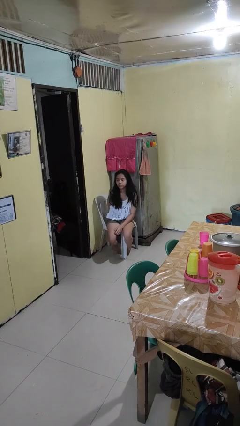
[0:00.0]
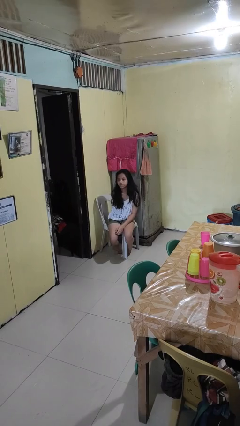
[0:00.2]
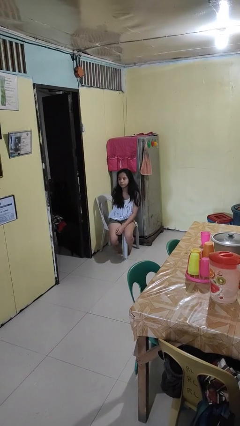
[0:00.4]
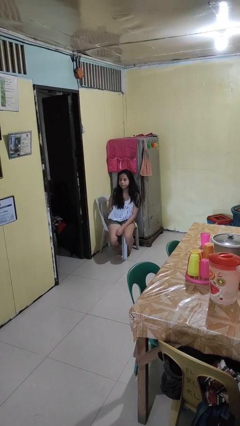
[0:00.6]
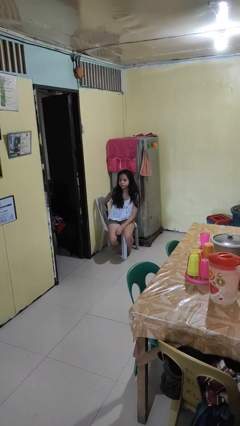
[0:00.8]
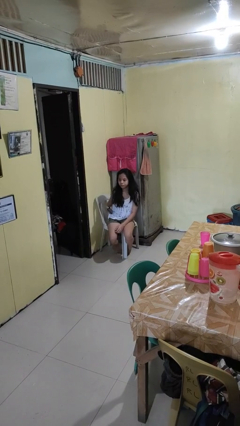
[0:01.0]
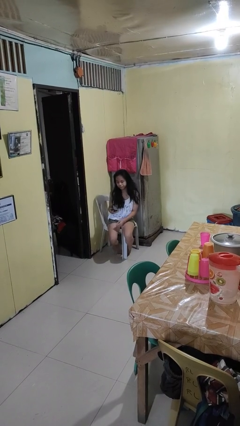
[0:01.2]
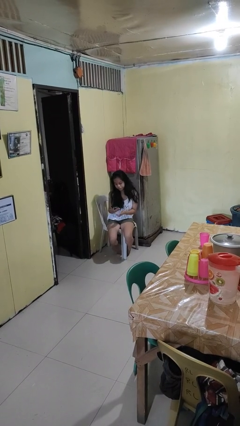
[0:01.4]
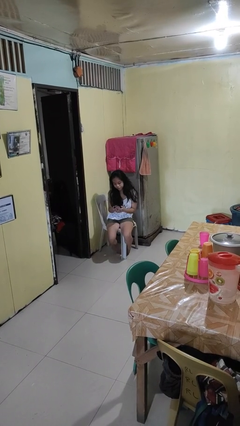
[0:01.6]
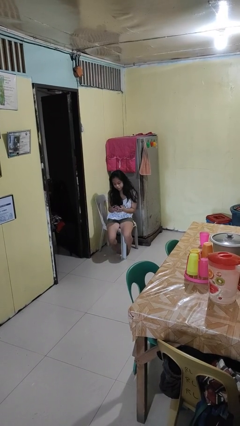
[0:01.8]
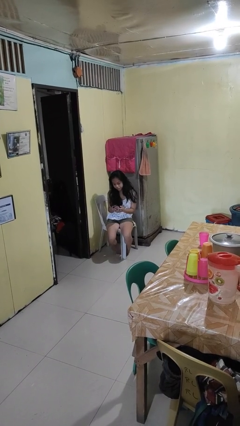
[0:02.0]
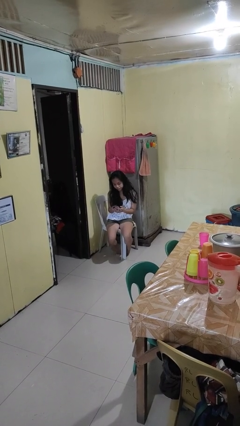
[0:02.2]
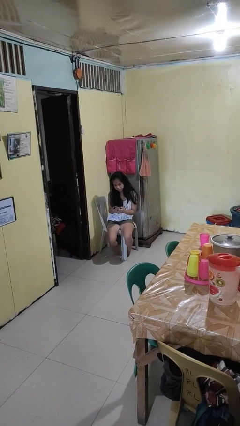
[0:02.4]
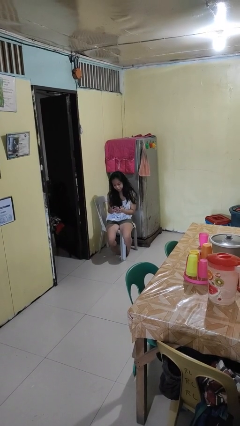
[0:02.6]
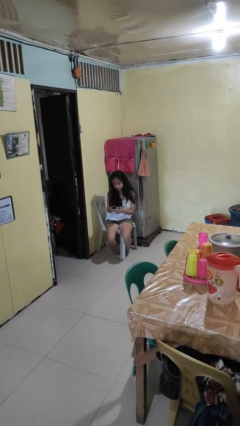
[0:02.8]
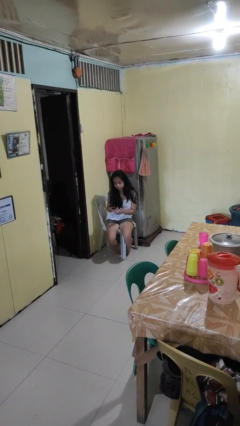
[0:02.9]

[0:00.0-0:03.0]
person takes phone from pocket

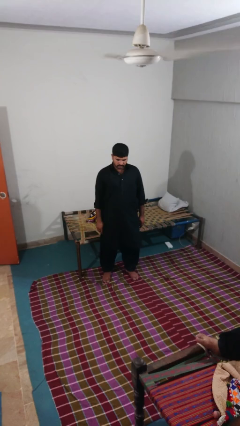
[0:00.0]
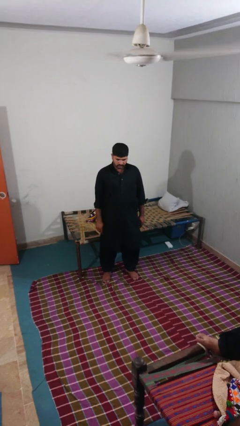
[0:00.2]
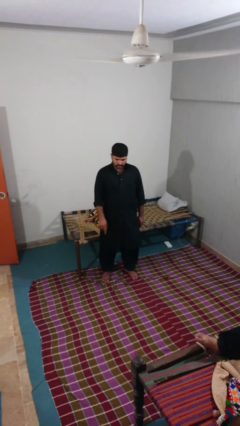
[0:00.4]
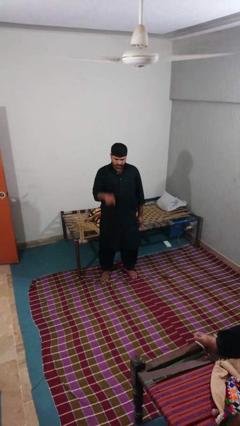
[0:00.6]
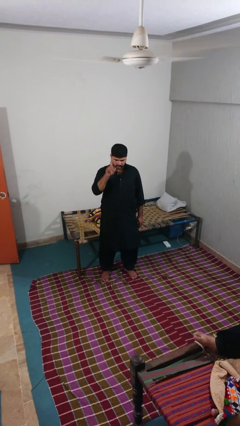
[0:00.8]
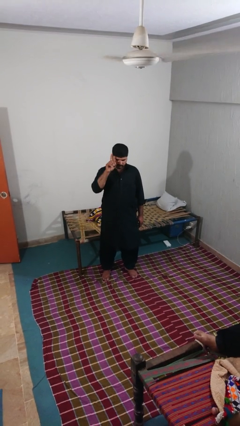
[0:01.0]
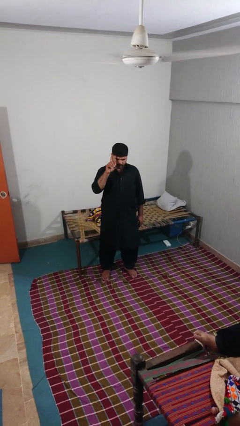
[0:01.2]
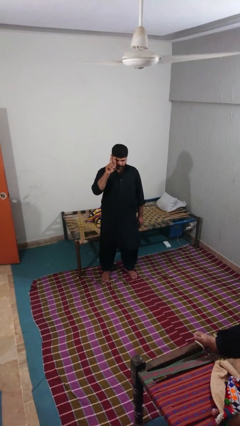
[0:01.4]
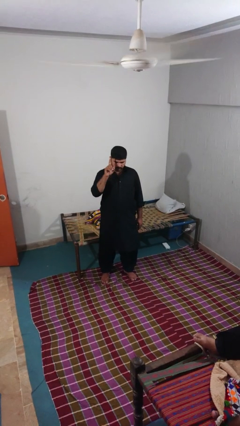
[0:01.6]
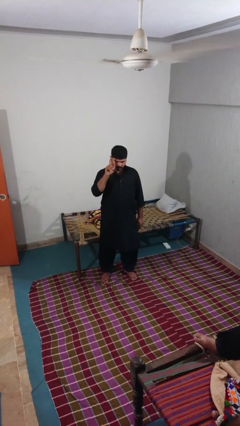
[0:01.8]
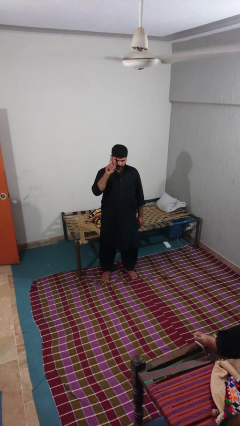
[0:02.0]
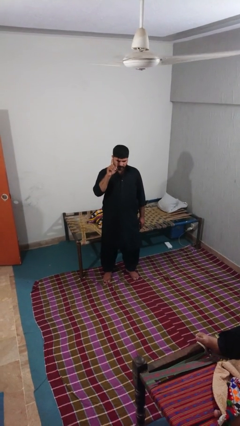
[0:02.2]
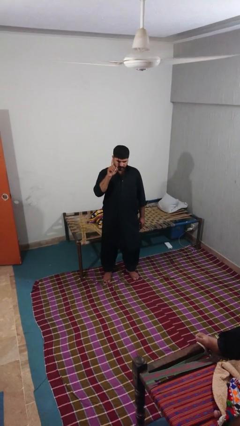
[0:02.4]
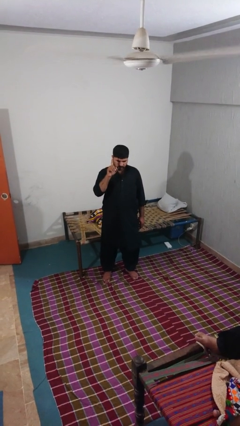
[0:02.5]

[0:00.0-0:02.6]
person gestures swipe up

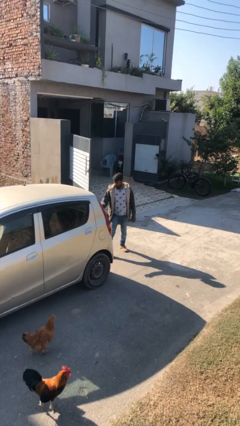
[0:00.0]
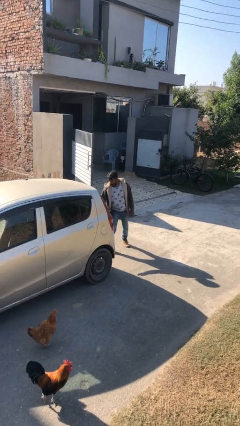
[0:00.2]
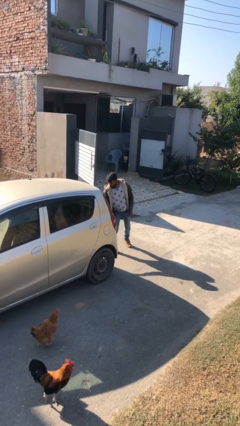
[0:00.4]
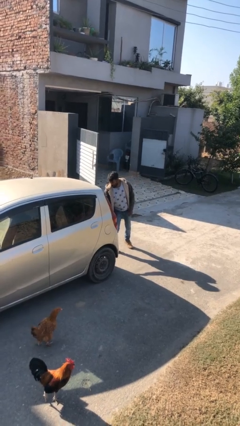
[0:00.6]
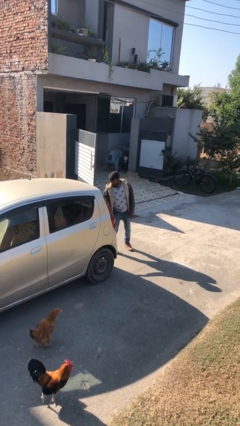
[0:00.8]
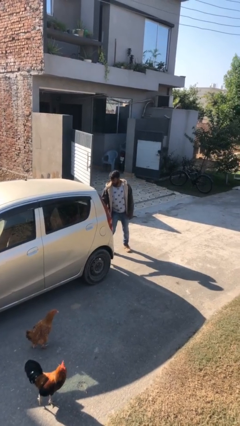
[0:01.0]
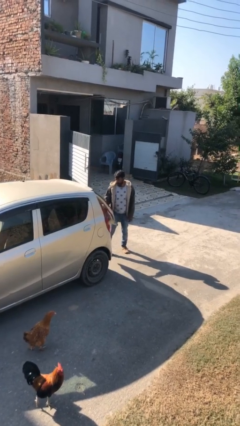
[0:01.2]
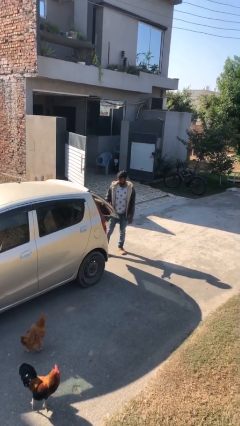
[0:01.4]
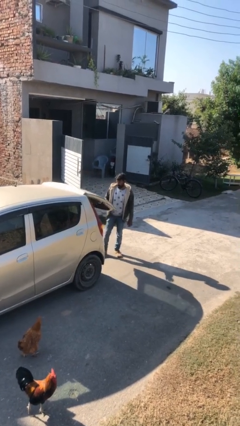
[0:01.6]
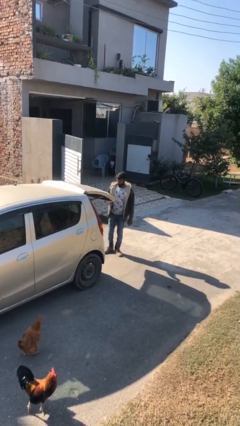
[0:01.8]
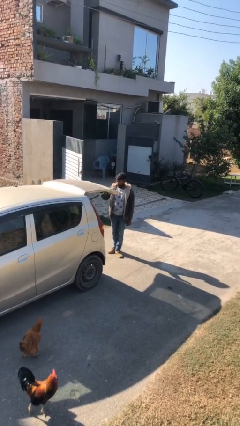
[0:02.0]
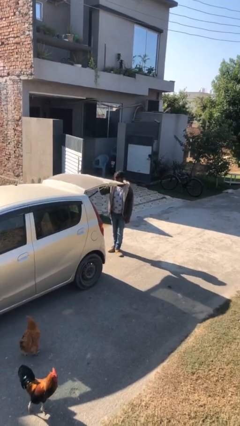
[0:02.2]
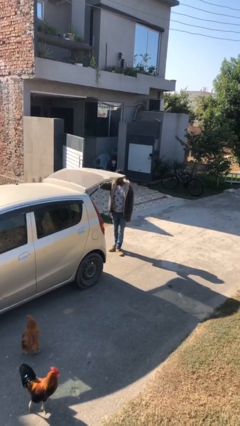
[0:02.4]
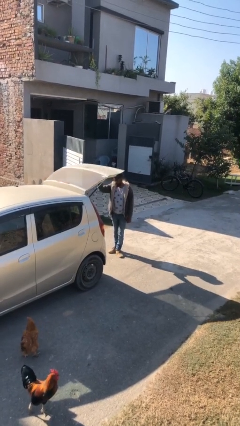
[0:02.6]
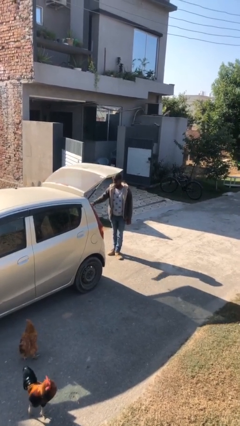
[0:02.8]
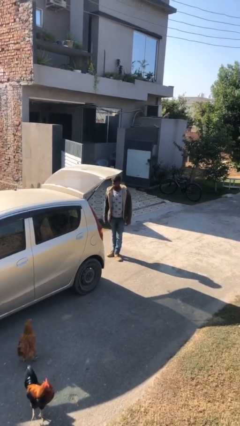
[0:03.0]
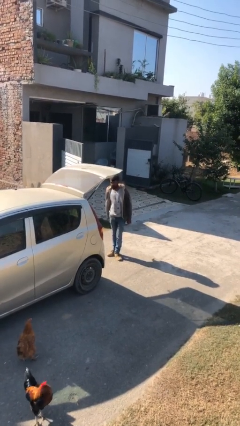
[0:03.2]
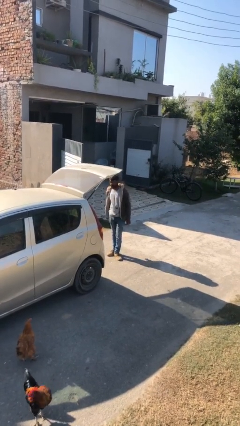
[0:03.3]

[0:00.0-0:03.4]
person opens car trunk

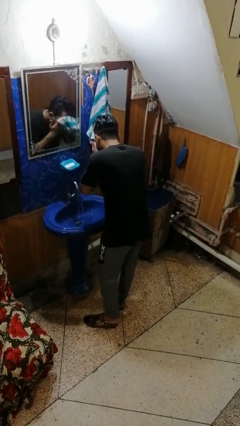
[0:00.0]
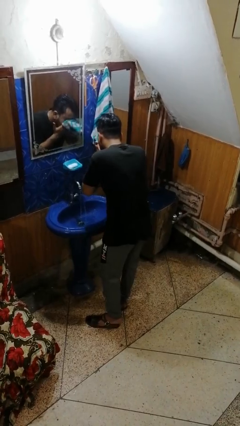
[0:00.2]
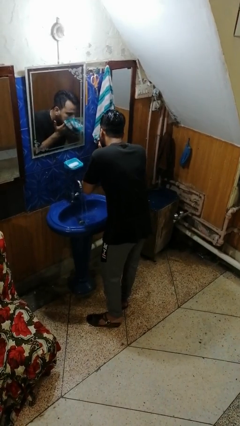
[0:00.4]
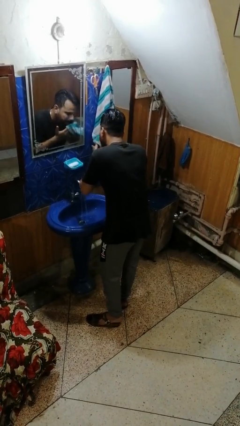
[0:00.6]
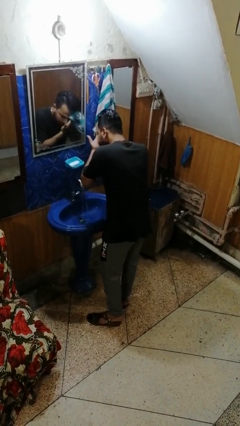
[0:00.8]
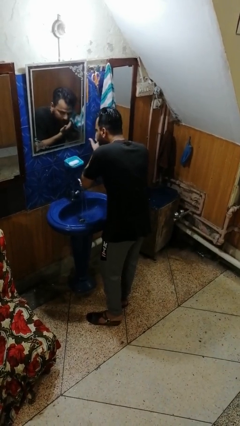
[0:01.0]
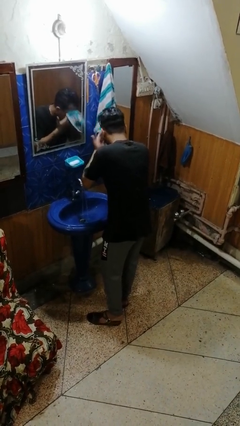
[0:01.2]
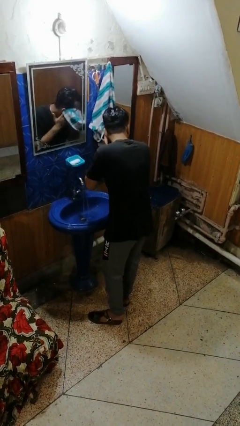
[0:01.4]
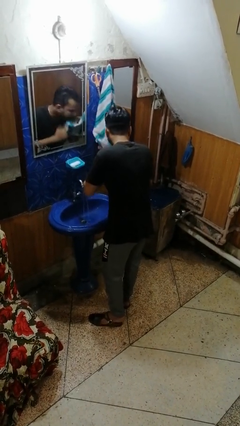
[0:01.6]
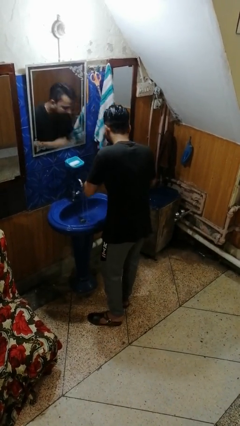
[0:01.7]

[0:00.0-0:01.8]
person dries face with towel

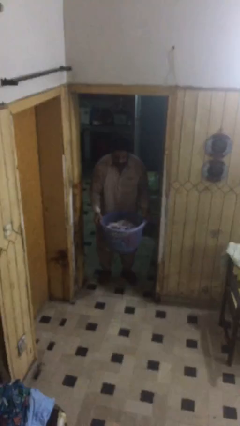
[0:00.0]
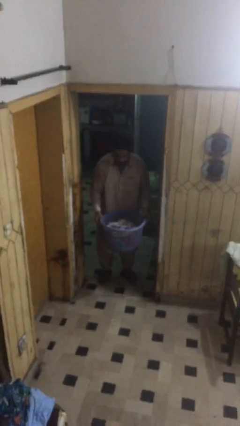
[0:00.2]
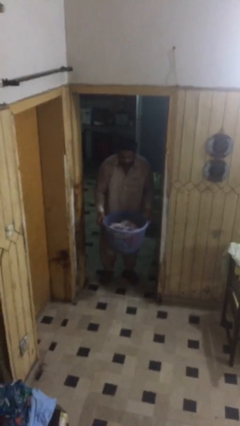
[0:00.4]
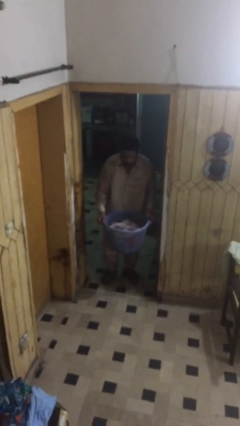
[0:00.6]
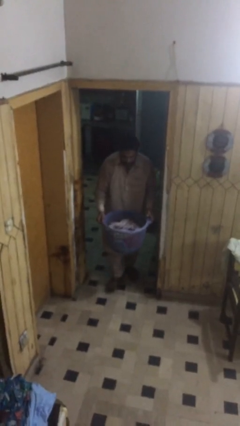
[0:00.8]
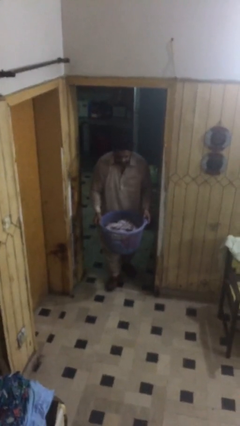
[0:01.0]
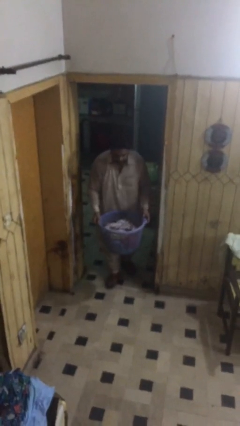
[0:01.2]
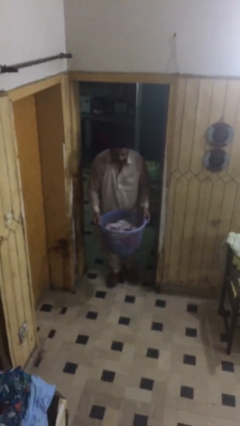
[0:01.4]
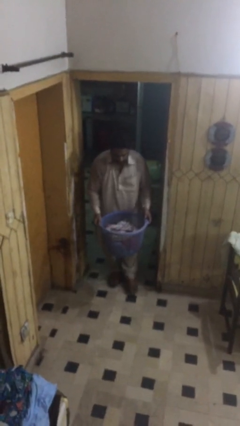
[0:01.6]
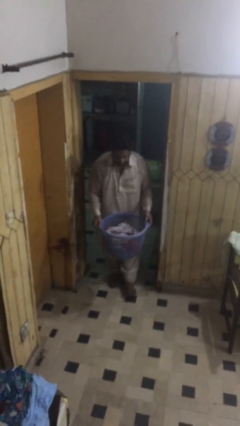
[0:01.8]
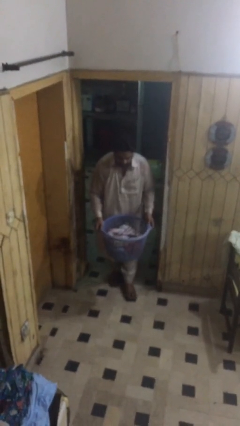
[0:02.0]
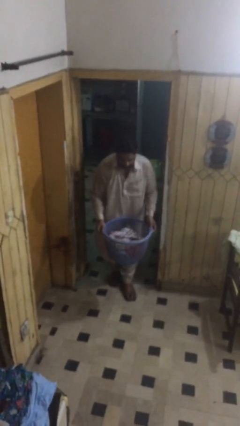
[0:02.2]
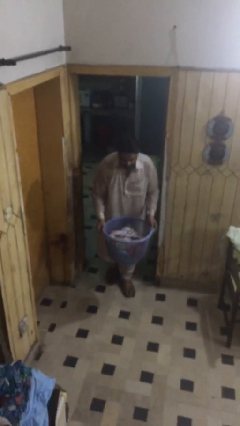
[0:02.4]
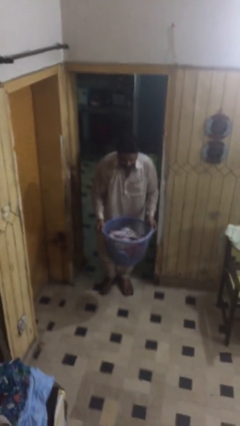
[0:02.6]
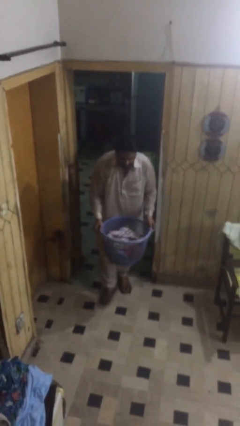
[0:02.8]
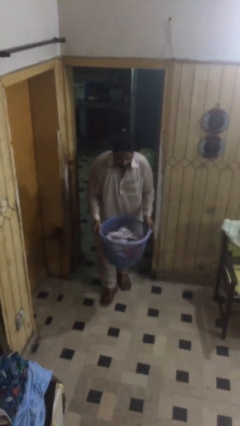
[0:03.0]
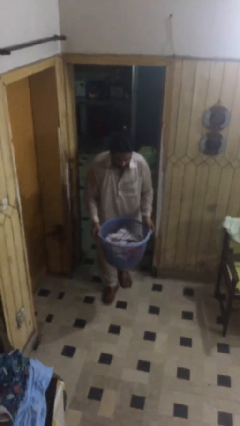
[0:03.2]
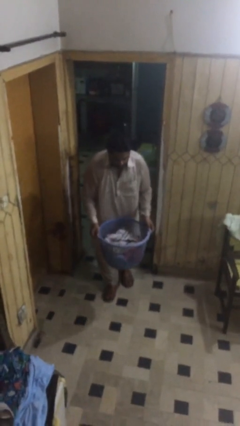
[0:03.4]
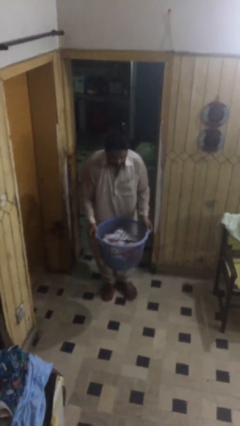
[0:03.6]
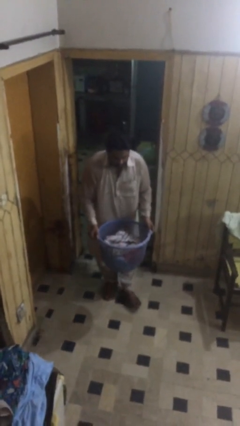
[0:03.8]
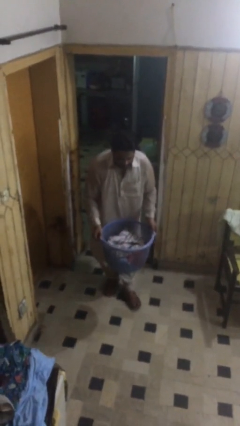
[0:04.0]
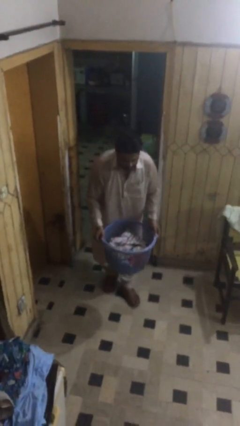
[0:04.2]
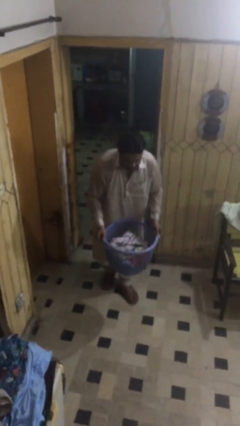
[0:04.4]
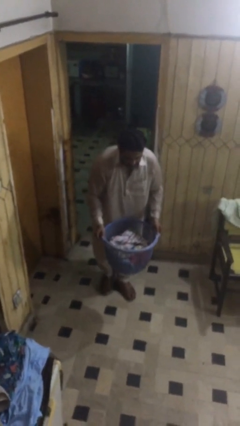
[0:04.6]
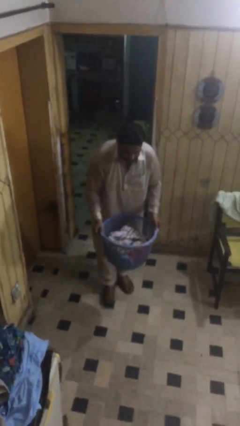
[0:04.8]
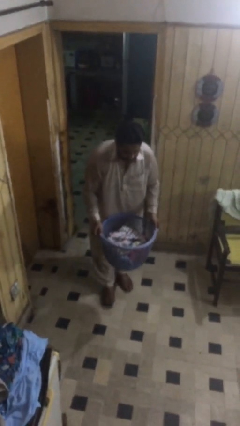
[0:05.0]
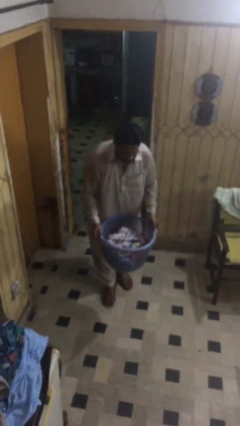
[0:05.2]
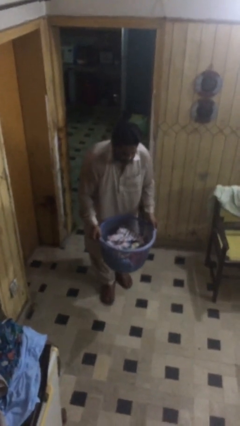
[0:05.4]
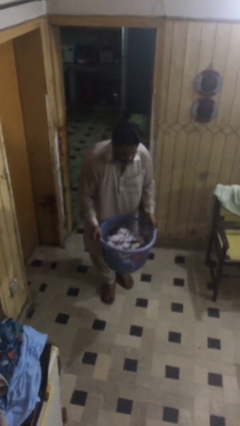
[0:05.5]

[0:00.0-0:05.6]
person carries heavy object

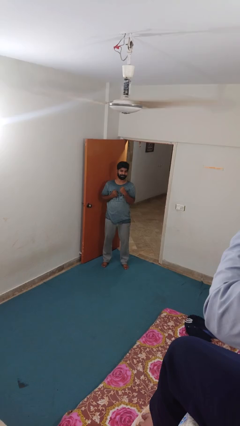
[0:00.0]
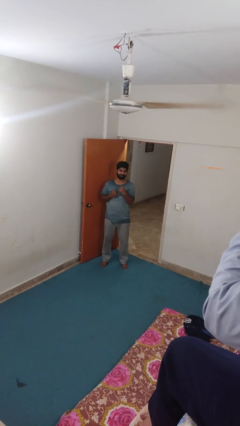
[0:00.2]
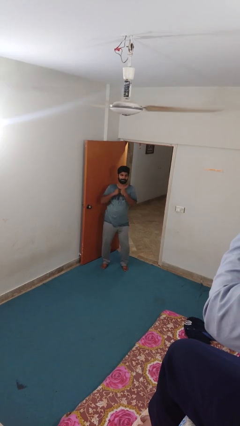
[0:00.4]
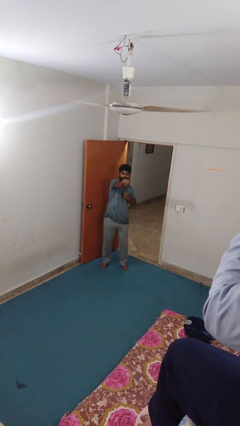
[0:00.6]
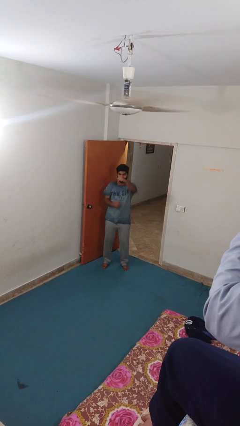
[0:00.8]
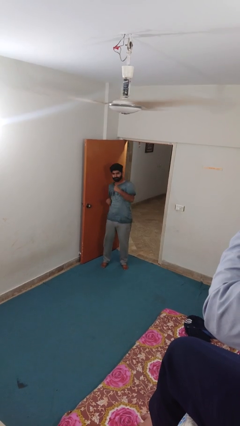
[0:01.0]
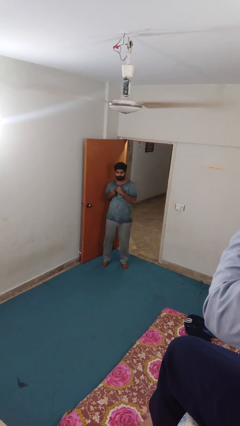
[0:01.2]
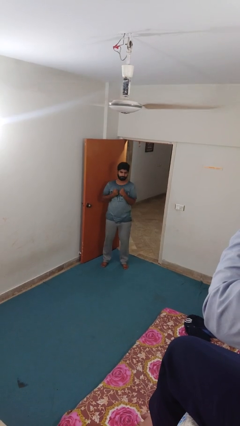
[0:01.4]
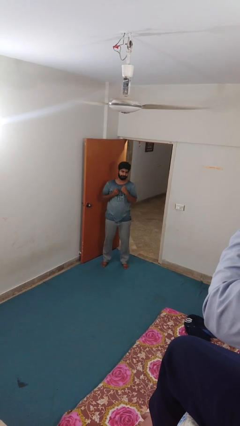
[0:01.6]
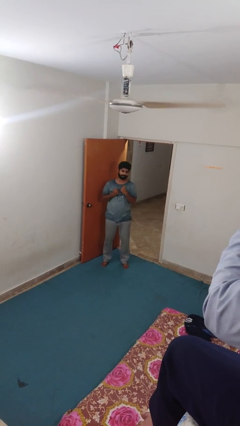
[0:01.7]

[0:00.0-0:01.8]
person punches
